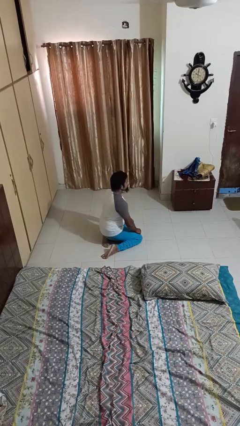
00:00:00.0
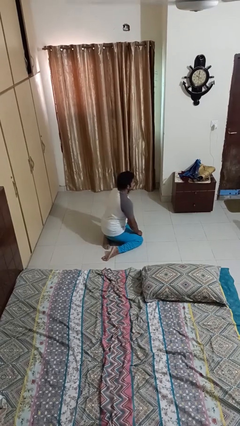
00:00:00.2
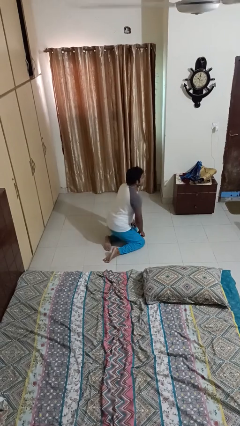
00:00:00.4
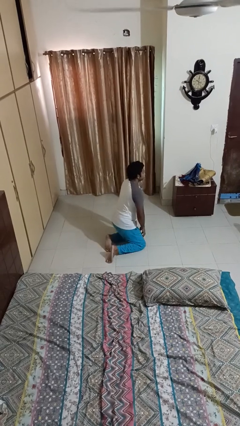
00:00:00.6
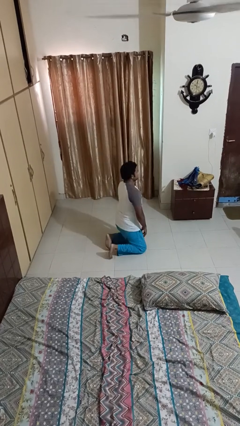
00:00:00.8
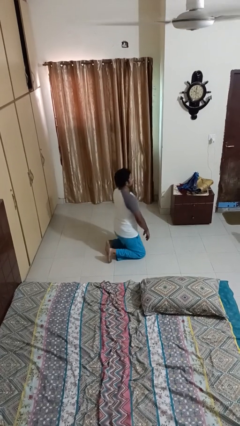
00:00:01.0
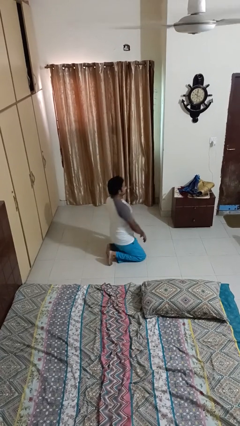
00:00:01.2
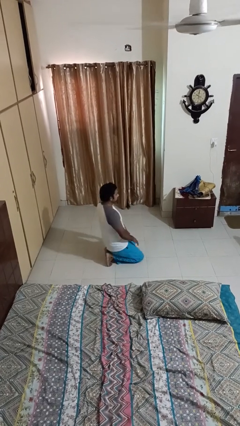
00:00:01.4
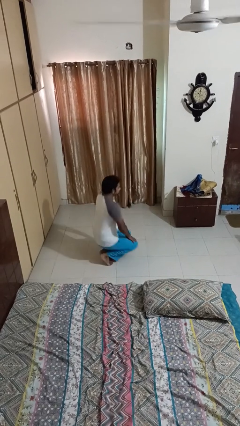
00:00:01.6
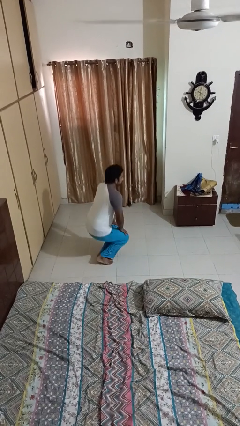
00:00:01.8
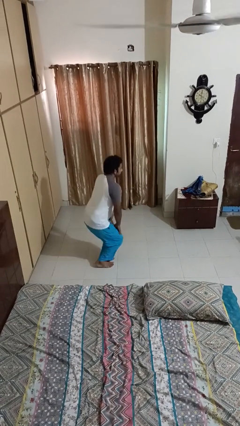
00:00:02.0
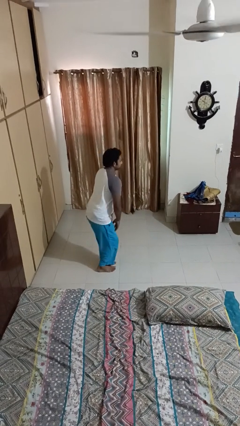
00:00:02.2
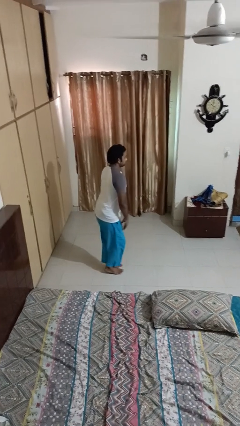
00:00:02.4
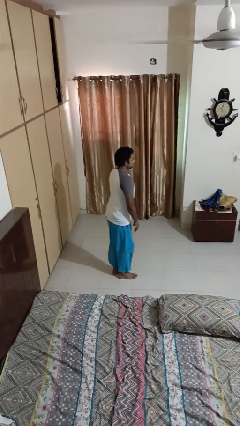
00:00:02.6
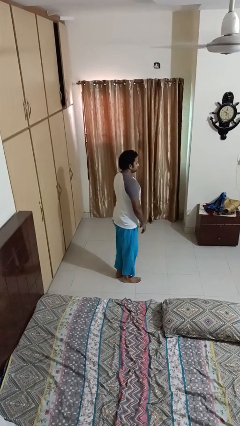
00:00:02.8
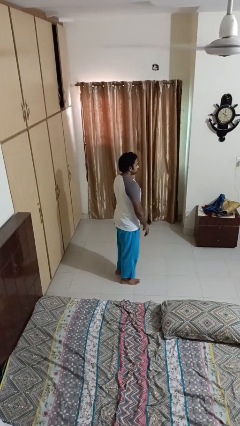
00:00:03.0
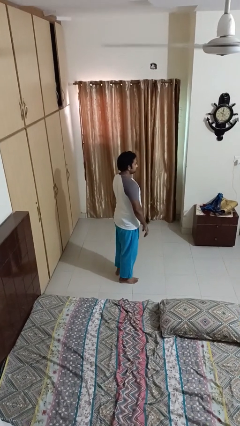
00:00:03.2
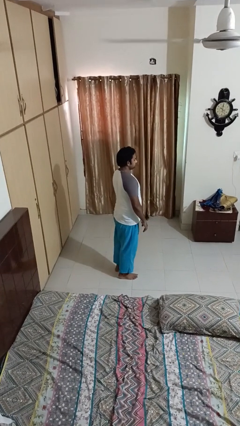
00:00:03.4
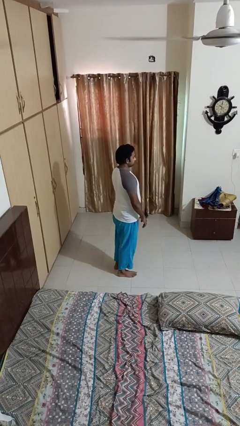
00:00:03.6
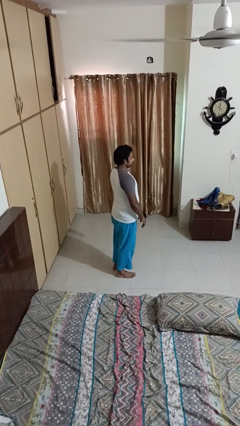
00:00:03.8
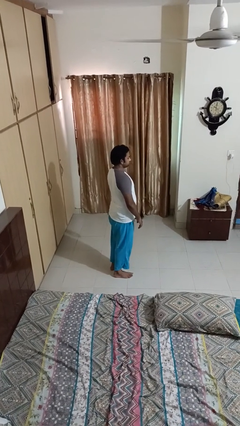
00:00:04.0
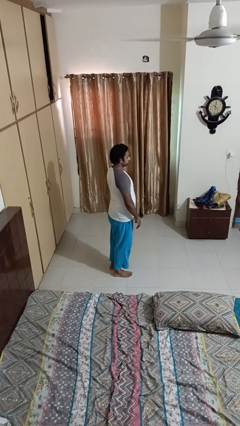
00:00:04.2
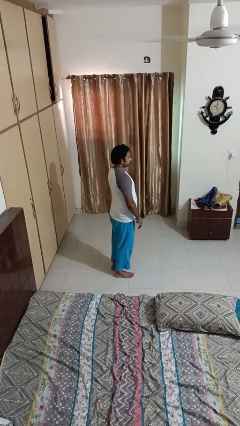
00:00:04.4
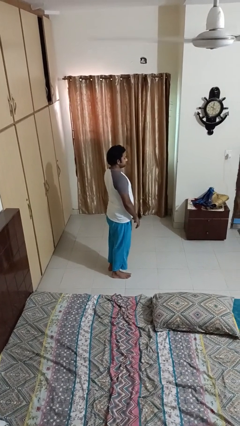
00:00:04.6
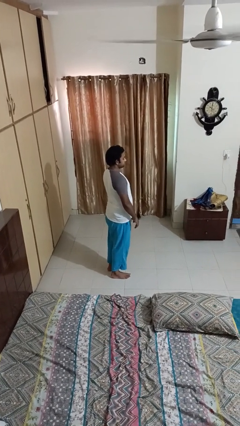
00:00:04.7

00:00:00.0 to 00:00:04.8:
person stands up from floor

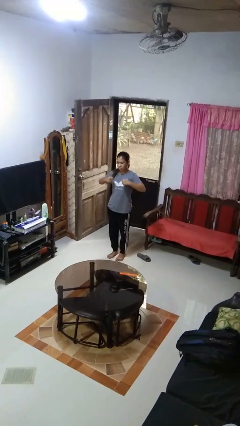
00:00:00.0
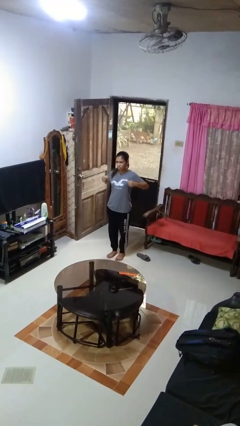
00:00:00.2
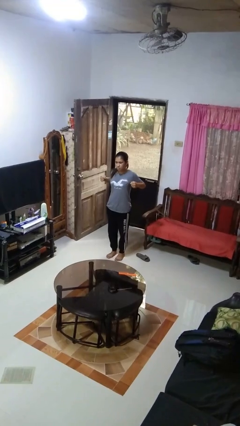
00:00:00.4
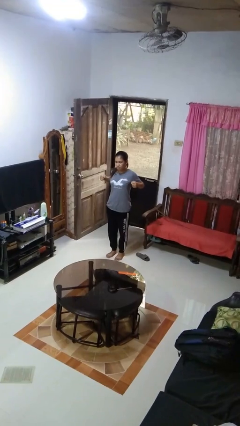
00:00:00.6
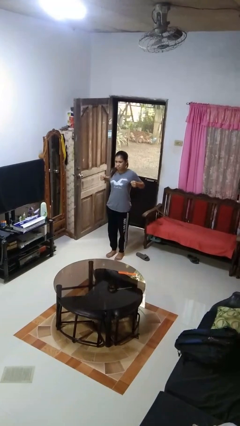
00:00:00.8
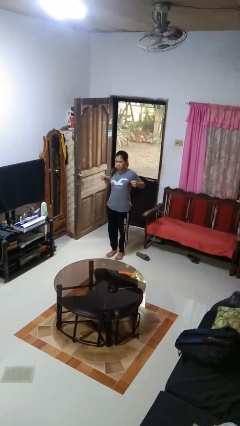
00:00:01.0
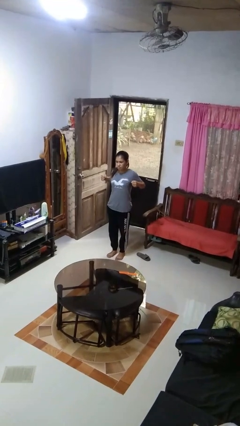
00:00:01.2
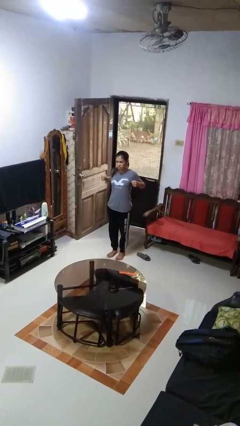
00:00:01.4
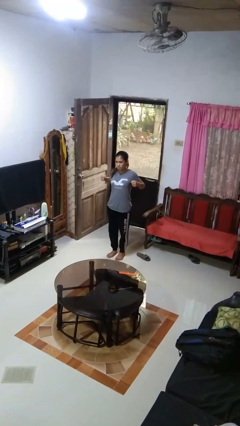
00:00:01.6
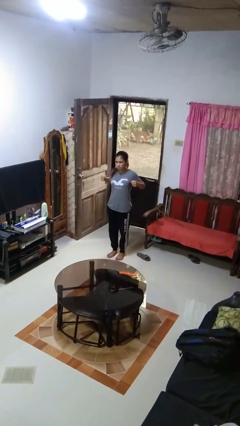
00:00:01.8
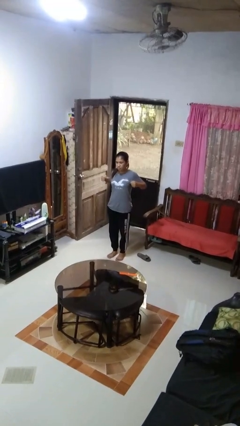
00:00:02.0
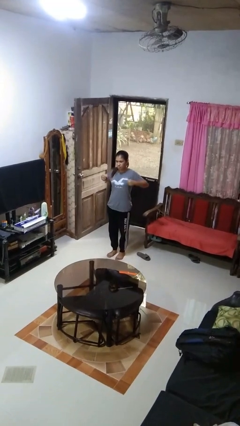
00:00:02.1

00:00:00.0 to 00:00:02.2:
person gestures zoom in

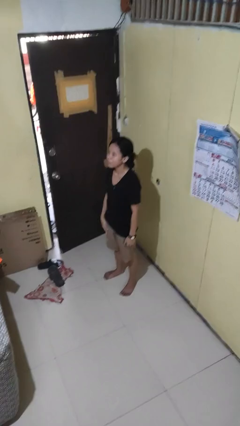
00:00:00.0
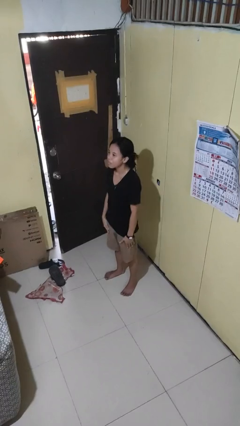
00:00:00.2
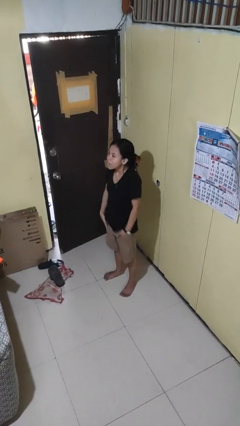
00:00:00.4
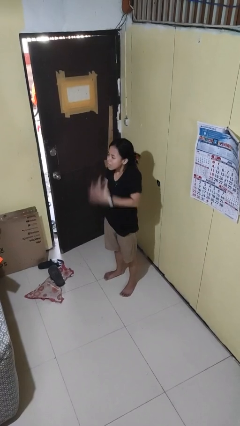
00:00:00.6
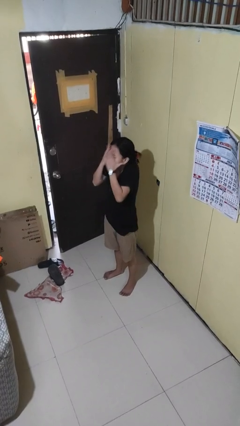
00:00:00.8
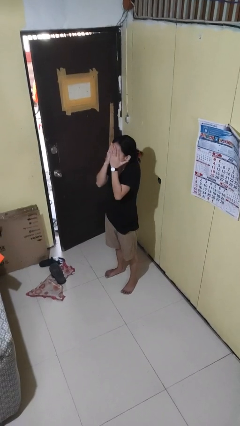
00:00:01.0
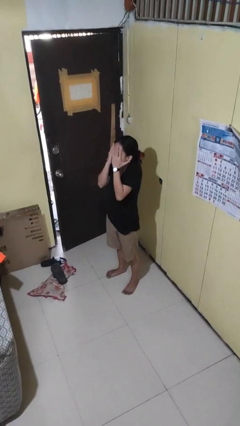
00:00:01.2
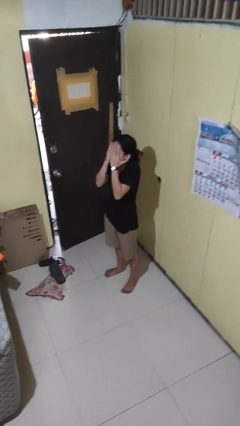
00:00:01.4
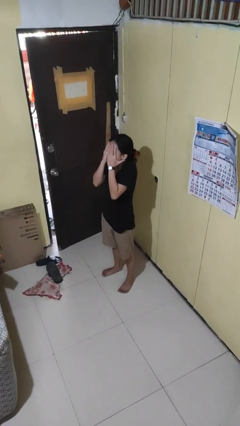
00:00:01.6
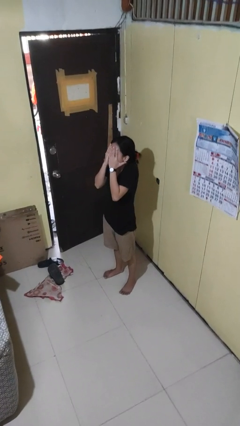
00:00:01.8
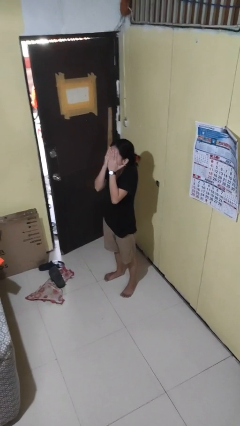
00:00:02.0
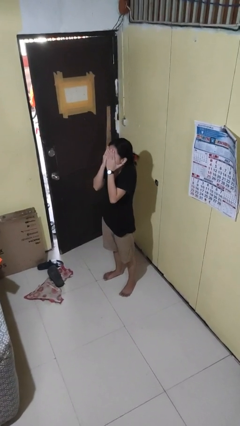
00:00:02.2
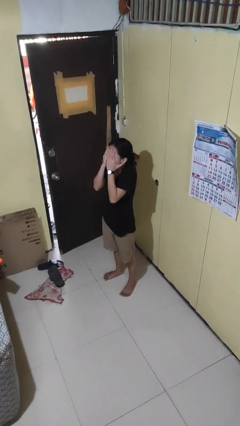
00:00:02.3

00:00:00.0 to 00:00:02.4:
person covers face with hands

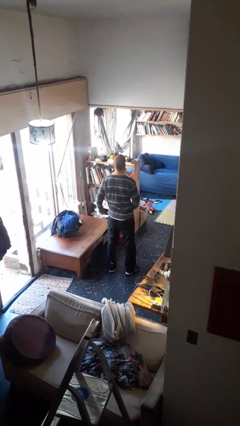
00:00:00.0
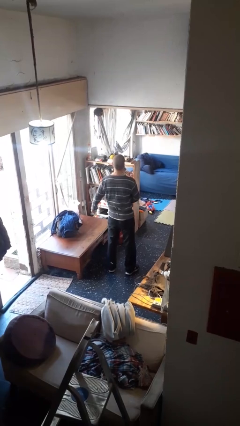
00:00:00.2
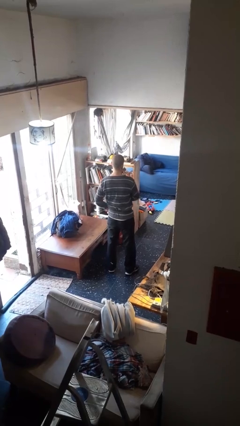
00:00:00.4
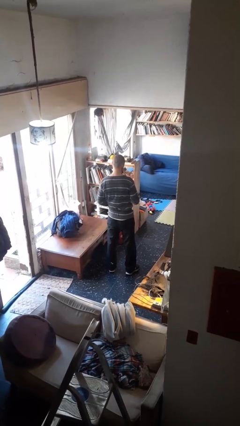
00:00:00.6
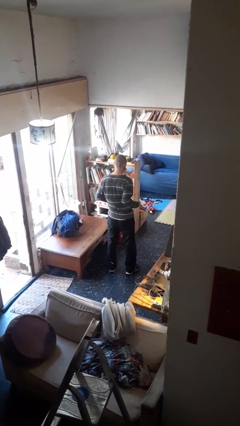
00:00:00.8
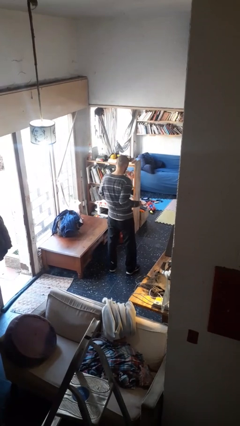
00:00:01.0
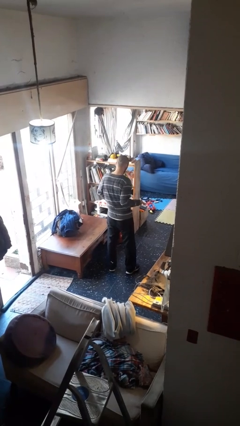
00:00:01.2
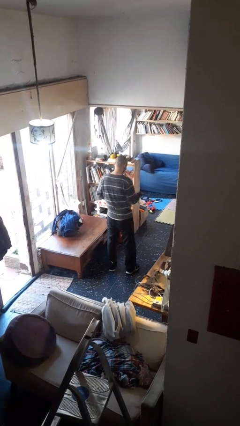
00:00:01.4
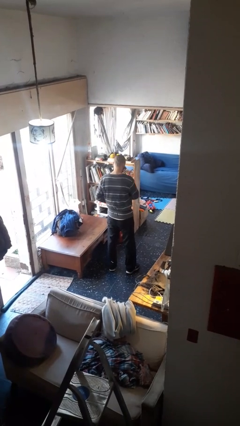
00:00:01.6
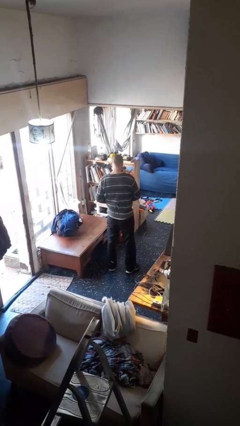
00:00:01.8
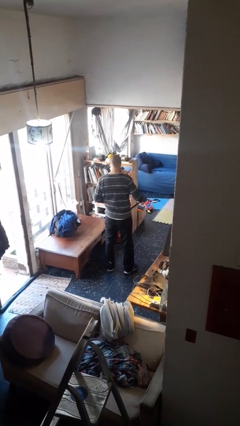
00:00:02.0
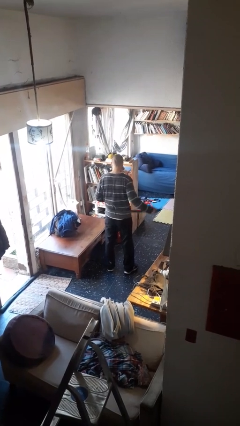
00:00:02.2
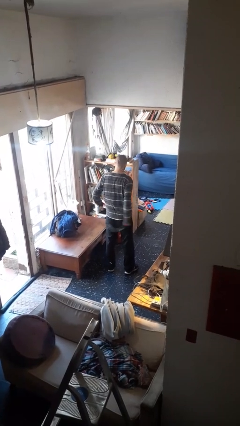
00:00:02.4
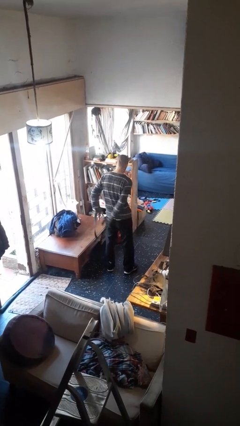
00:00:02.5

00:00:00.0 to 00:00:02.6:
person takes off belt

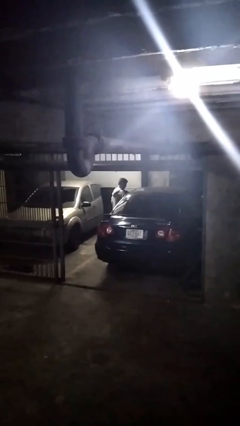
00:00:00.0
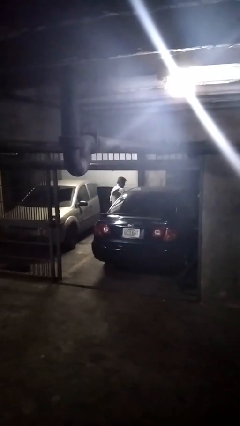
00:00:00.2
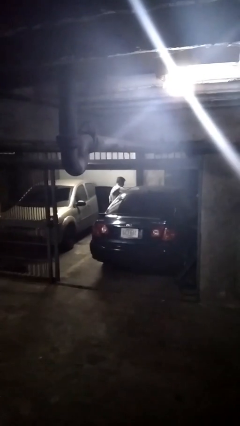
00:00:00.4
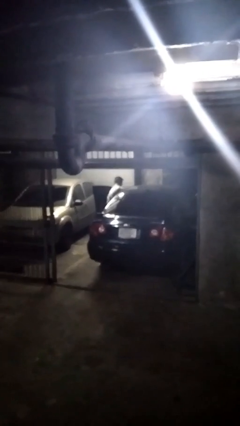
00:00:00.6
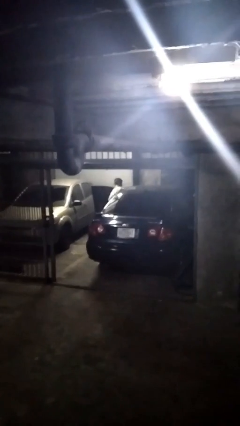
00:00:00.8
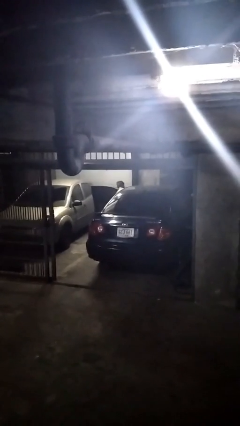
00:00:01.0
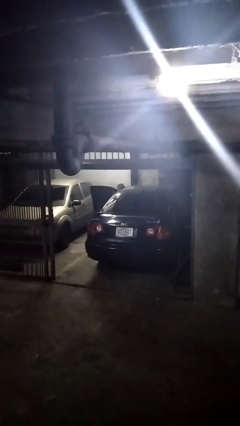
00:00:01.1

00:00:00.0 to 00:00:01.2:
person enters car

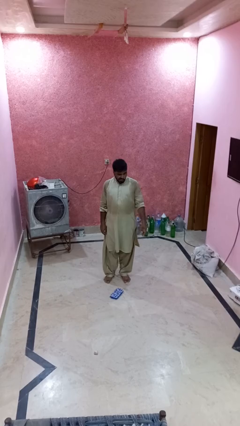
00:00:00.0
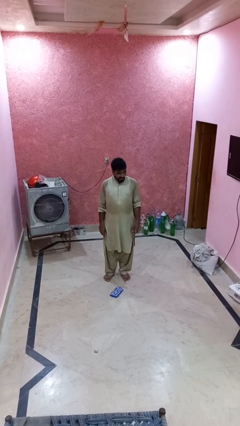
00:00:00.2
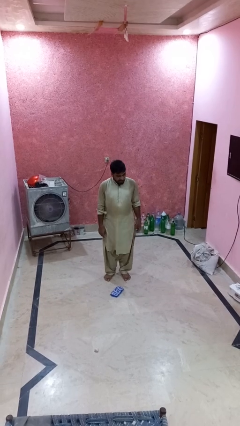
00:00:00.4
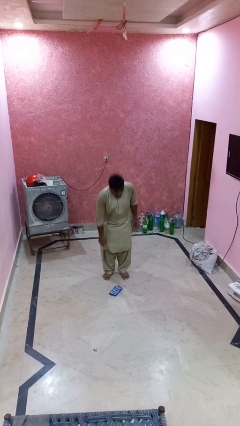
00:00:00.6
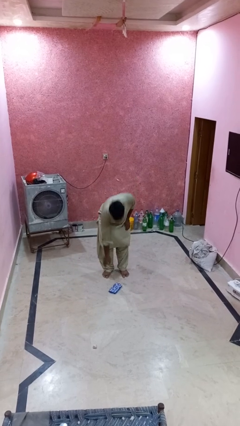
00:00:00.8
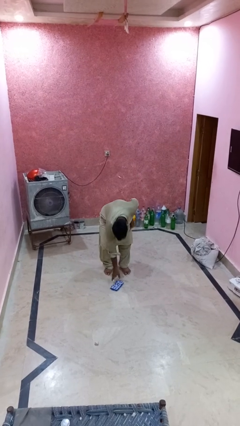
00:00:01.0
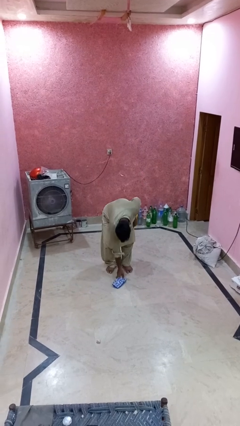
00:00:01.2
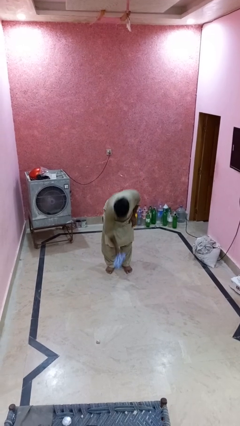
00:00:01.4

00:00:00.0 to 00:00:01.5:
person picks up object from floor

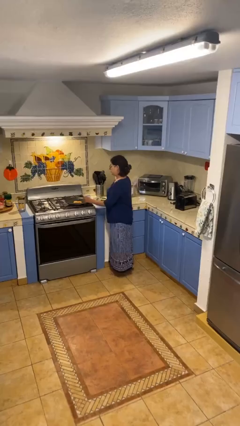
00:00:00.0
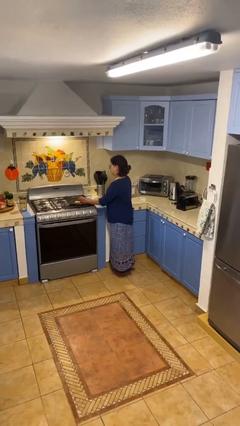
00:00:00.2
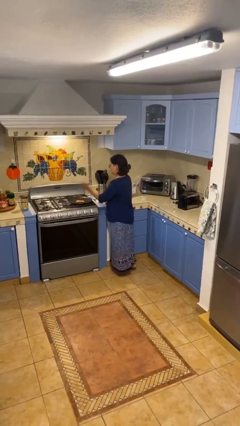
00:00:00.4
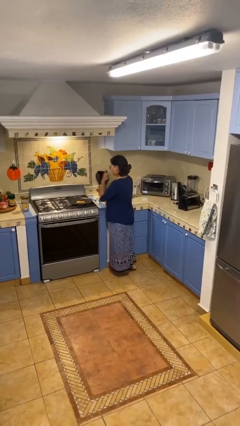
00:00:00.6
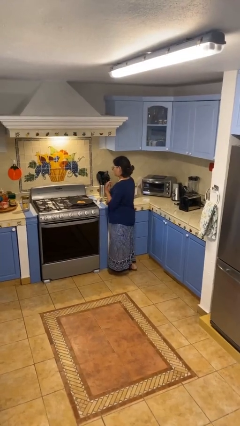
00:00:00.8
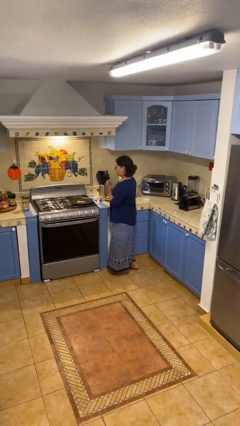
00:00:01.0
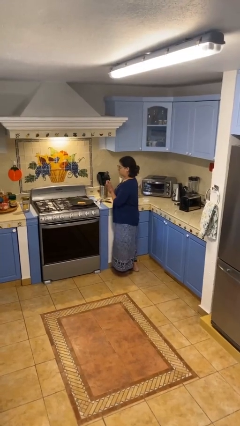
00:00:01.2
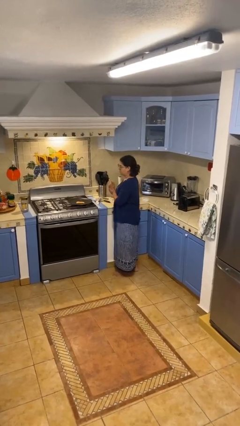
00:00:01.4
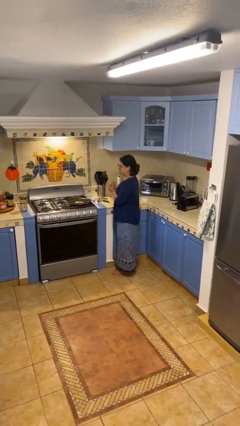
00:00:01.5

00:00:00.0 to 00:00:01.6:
person burns hand

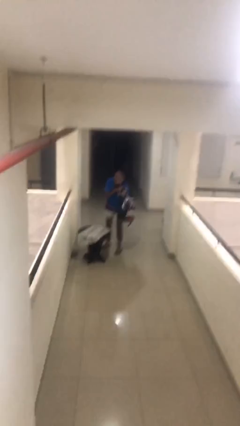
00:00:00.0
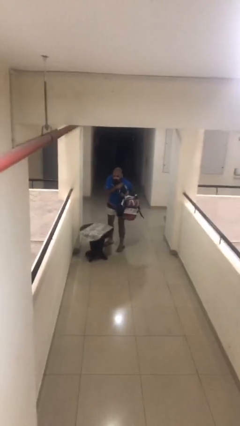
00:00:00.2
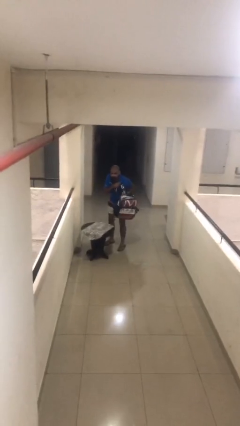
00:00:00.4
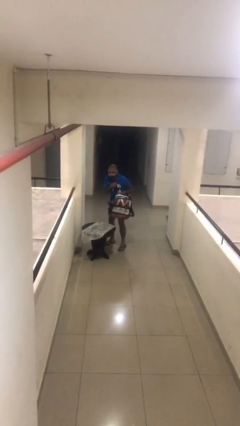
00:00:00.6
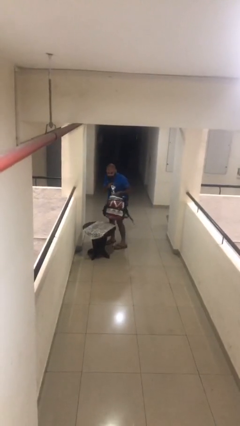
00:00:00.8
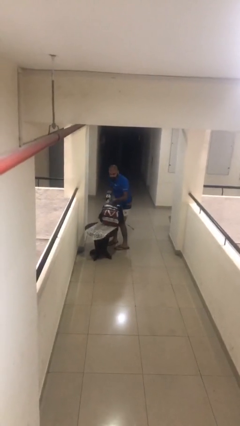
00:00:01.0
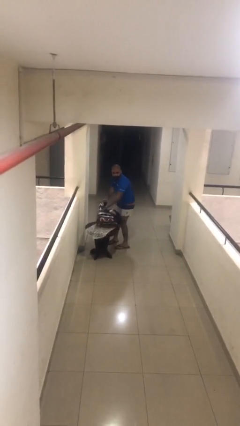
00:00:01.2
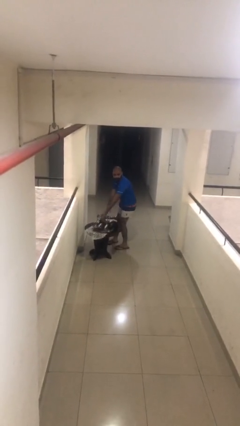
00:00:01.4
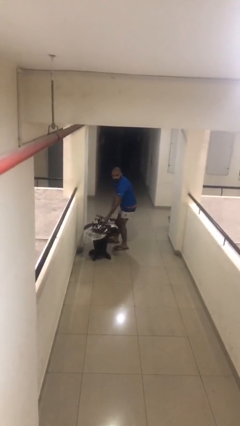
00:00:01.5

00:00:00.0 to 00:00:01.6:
person puts down object on table
